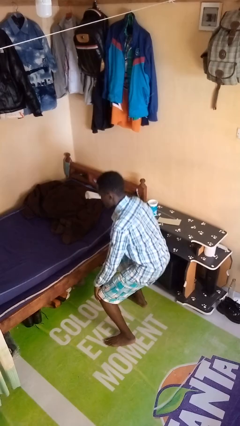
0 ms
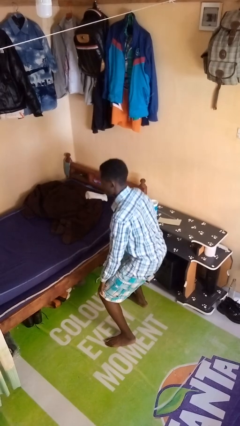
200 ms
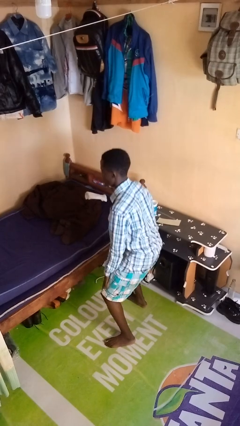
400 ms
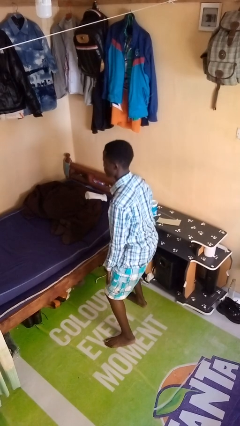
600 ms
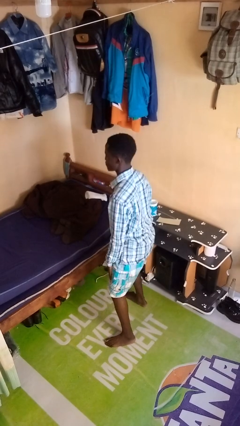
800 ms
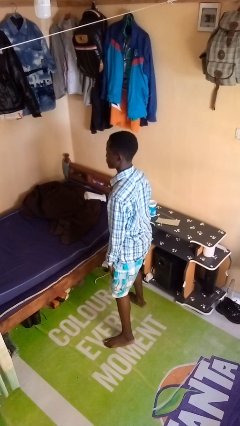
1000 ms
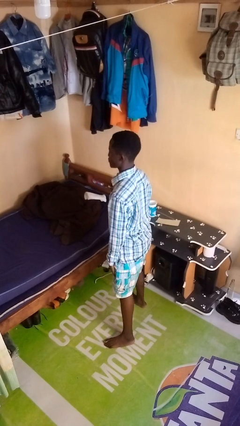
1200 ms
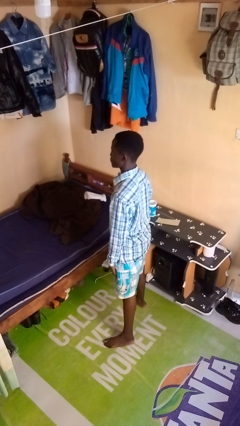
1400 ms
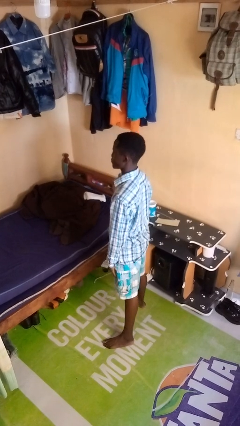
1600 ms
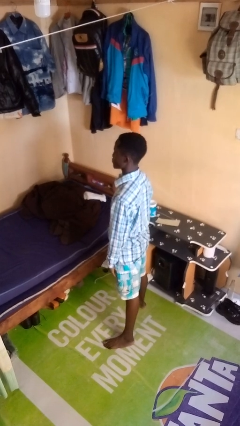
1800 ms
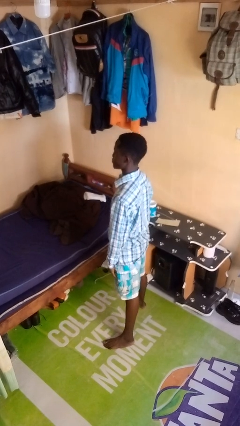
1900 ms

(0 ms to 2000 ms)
person stands up

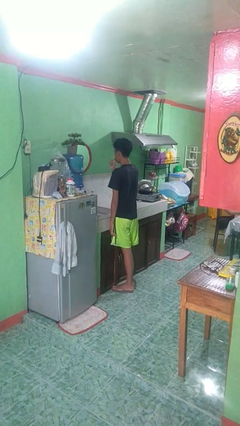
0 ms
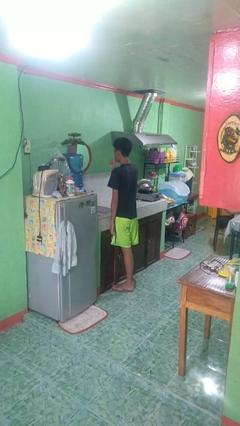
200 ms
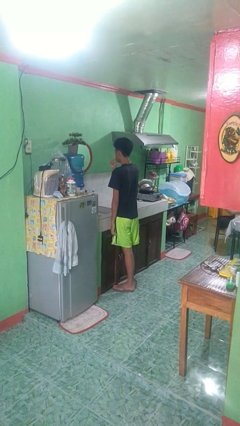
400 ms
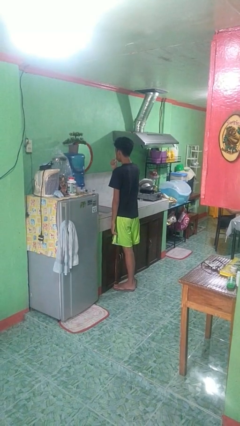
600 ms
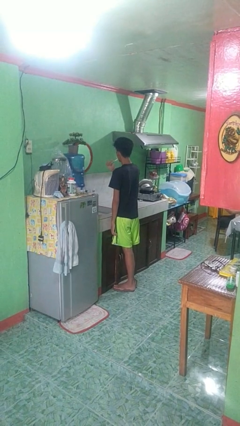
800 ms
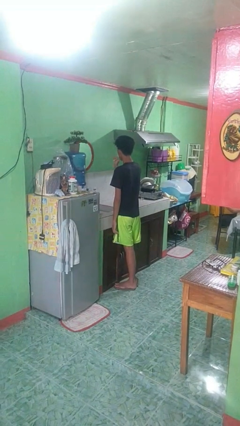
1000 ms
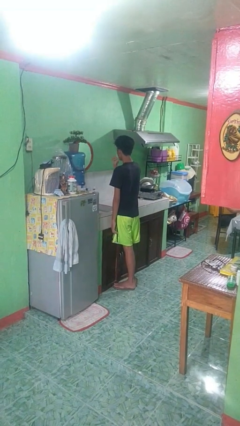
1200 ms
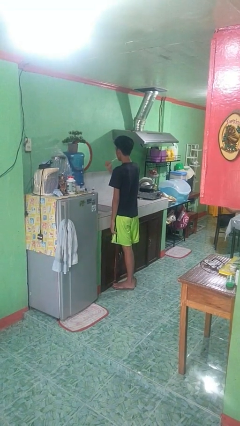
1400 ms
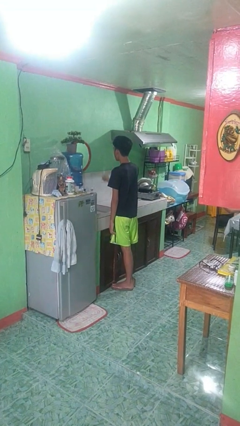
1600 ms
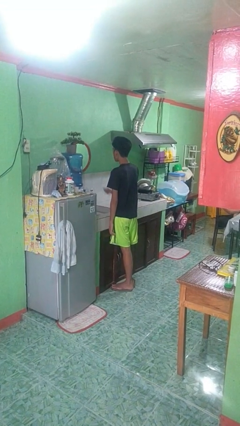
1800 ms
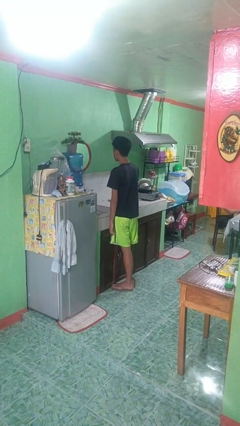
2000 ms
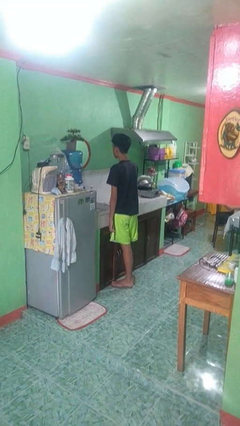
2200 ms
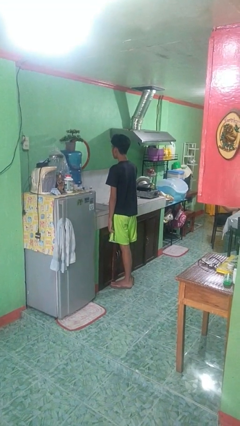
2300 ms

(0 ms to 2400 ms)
person brushes teeth

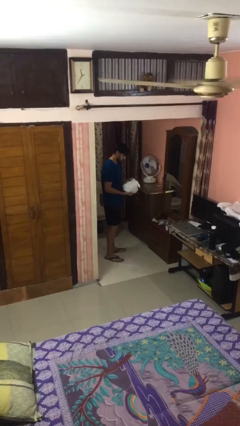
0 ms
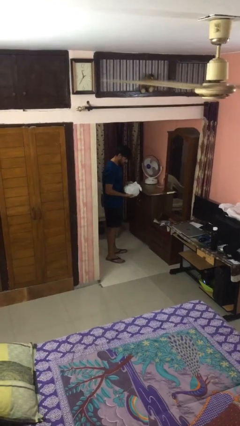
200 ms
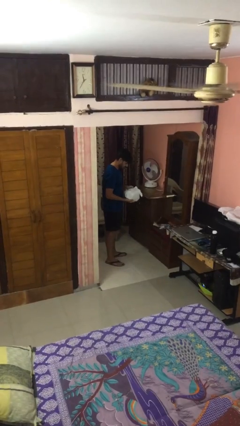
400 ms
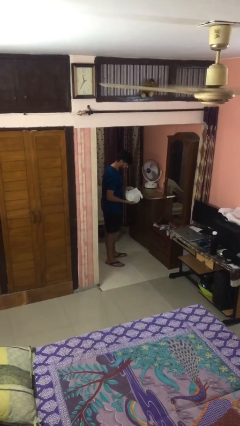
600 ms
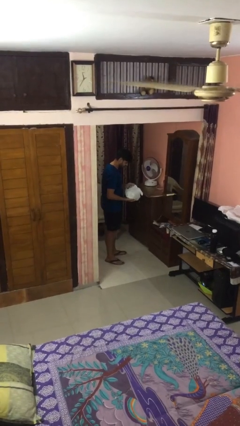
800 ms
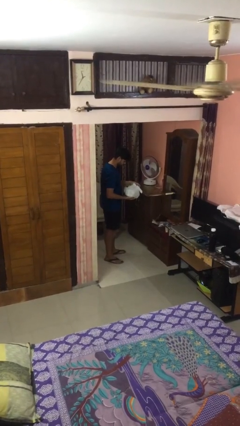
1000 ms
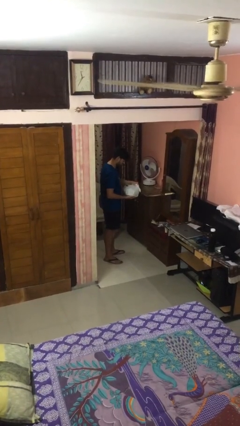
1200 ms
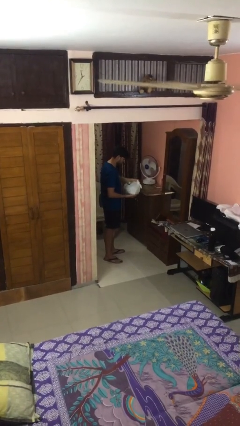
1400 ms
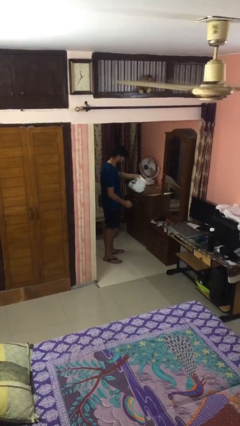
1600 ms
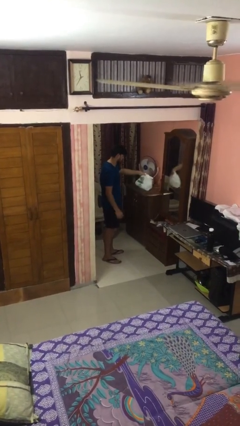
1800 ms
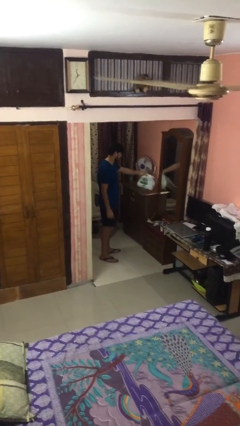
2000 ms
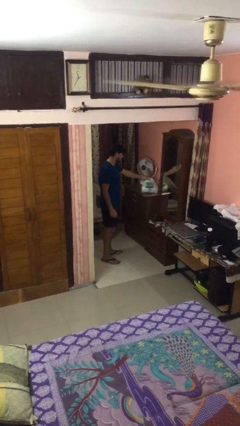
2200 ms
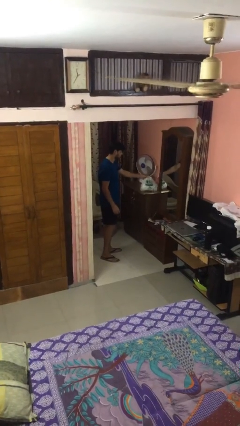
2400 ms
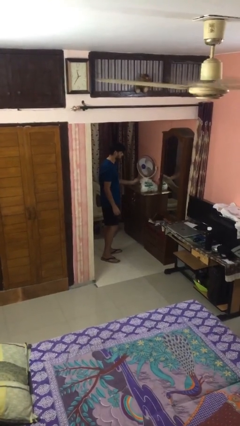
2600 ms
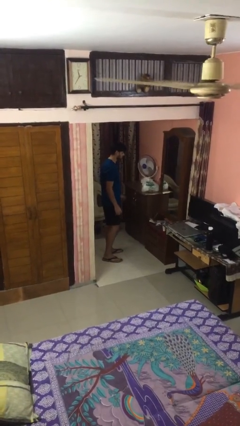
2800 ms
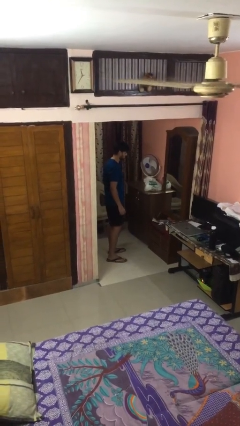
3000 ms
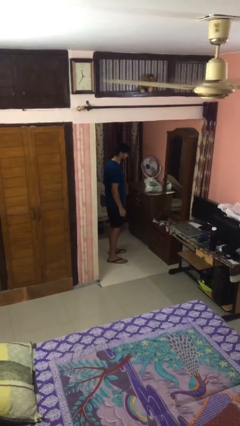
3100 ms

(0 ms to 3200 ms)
person puts down object on countertop

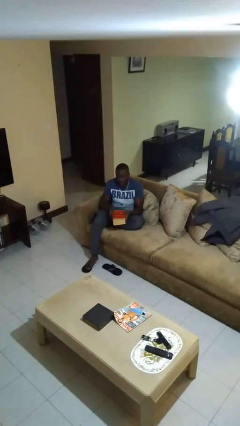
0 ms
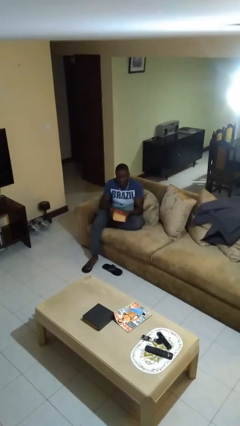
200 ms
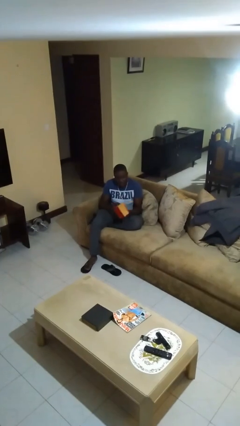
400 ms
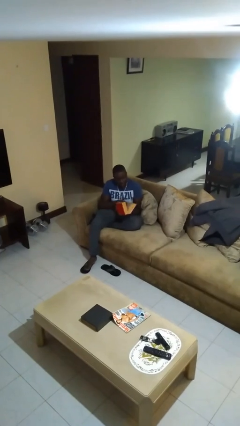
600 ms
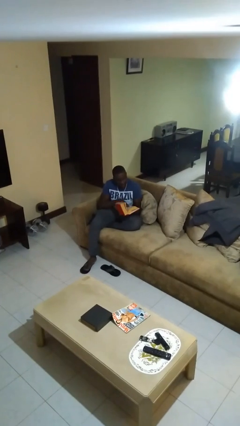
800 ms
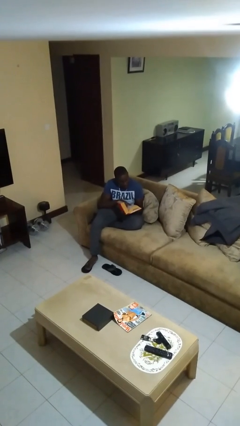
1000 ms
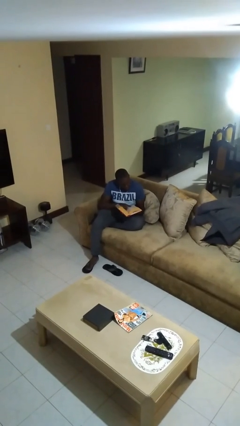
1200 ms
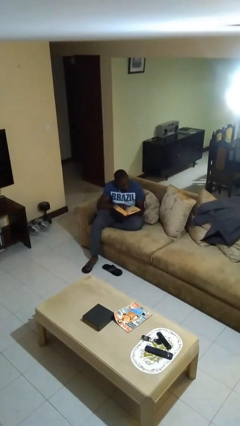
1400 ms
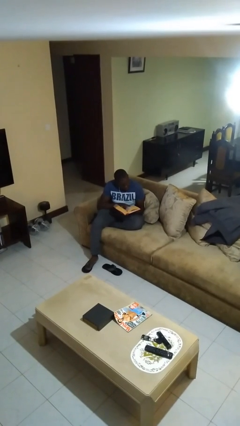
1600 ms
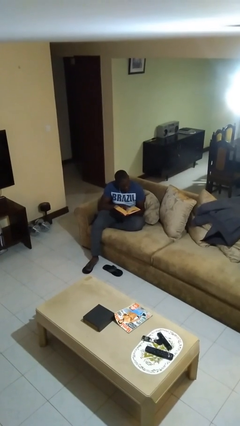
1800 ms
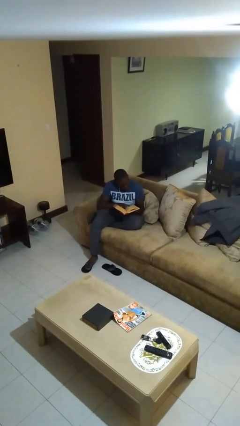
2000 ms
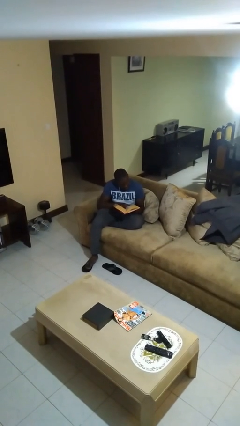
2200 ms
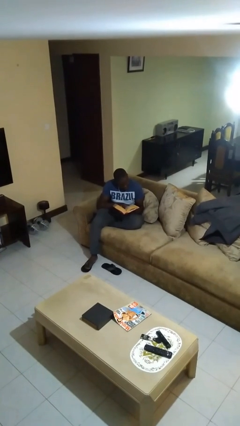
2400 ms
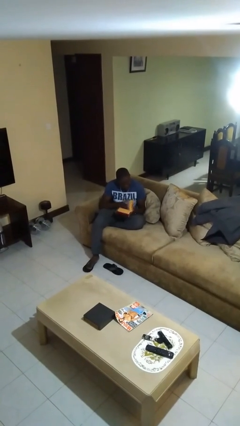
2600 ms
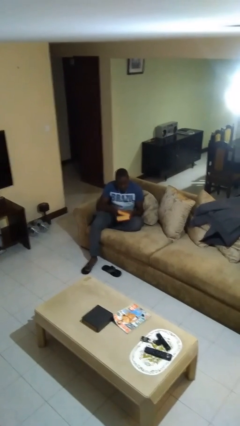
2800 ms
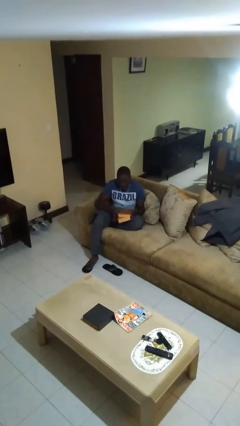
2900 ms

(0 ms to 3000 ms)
person reads book

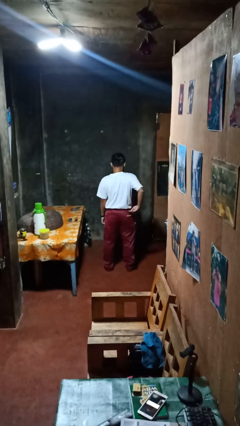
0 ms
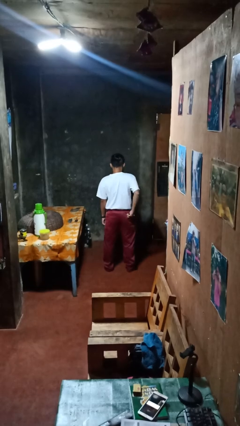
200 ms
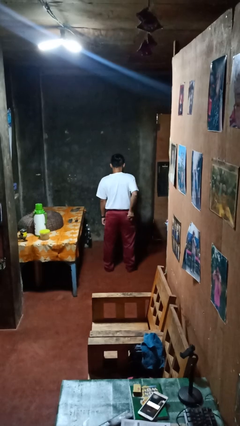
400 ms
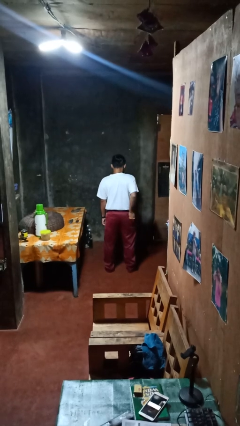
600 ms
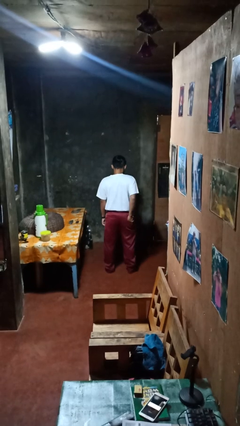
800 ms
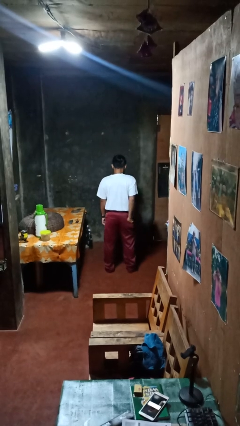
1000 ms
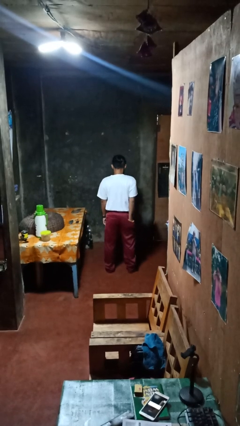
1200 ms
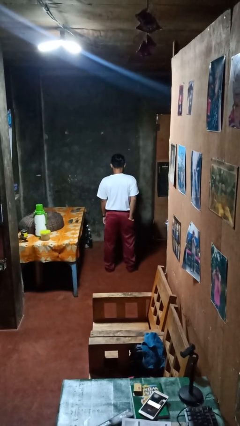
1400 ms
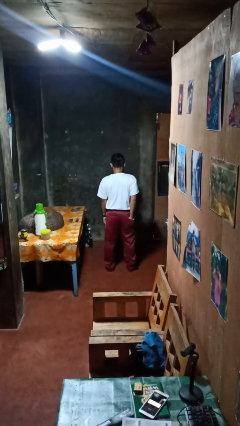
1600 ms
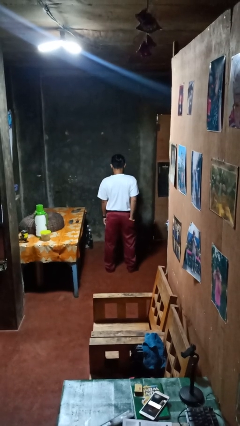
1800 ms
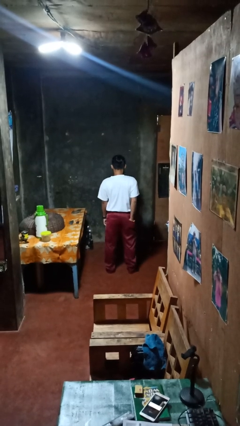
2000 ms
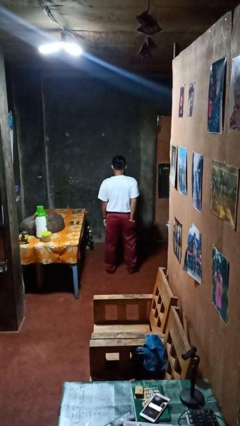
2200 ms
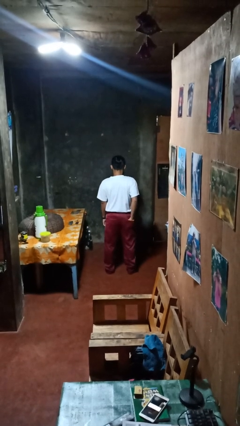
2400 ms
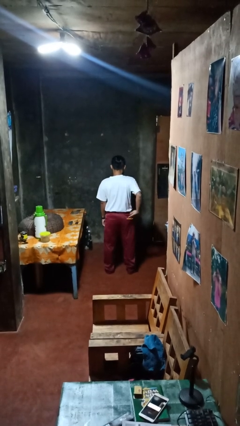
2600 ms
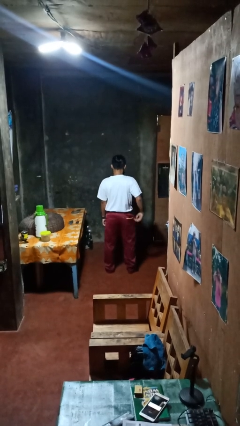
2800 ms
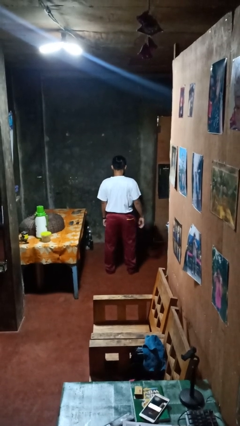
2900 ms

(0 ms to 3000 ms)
person puts hands in back pockets

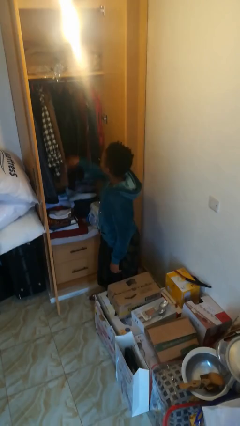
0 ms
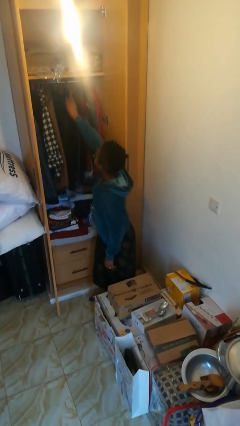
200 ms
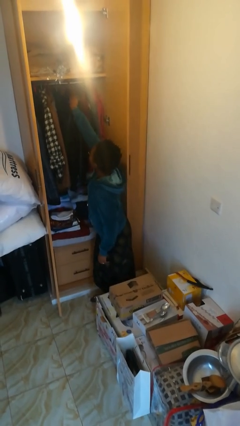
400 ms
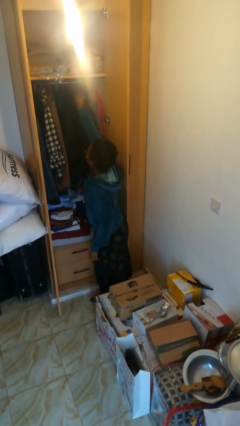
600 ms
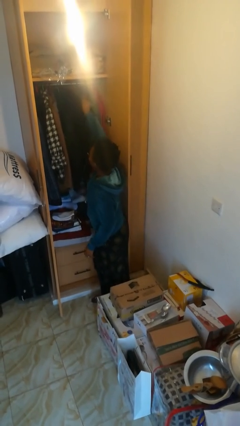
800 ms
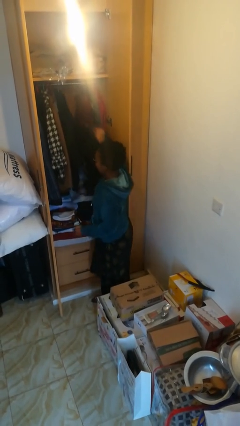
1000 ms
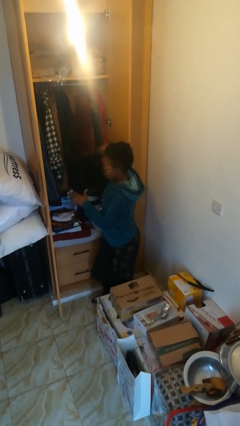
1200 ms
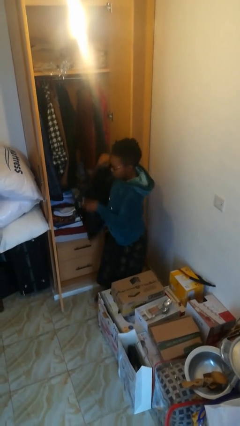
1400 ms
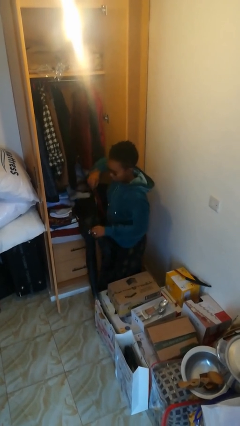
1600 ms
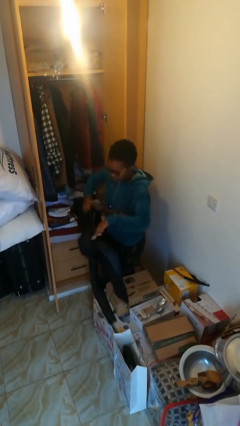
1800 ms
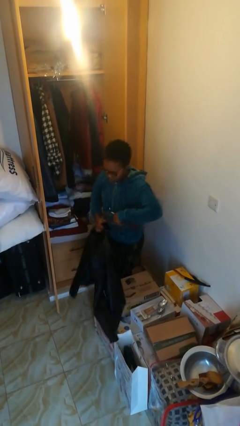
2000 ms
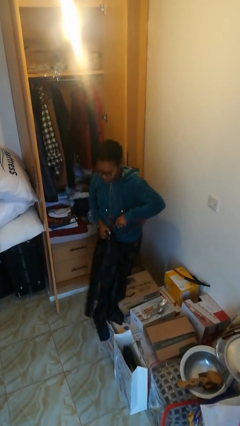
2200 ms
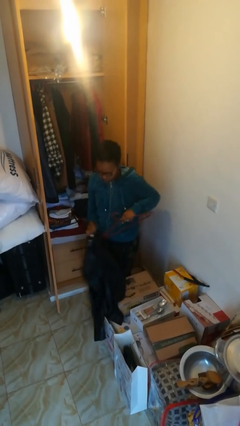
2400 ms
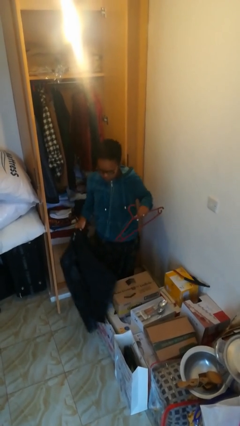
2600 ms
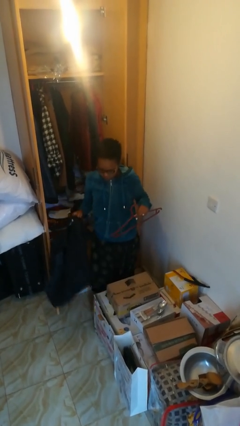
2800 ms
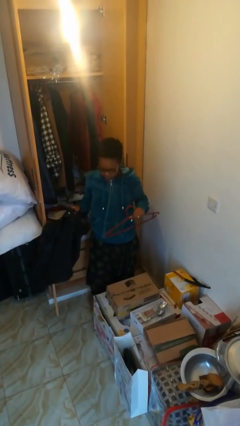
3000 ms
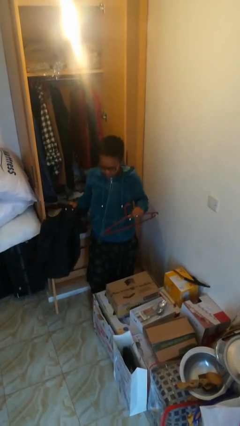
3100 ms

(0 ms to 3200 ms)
person takes clothes from closet

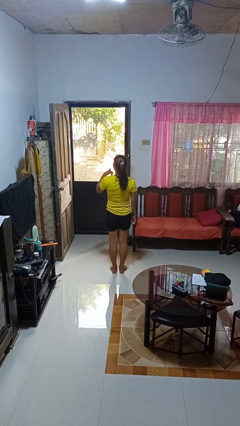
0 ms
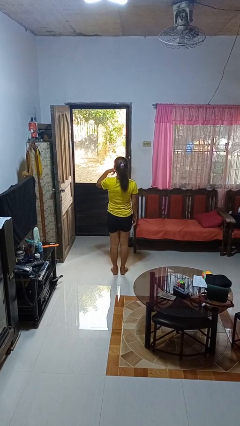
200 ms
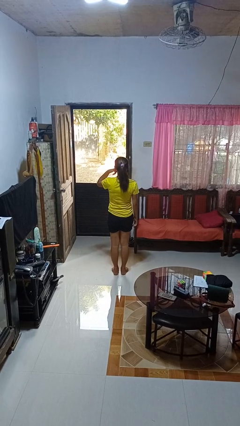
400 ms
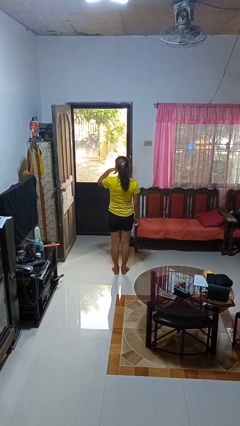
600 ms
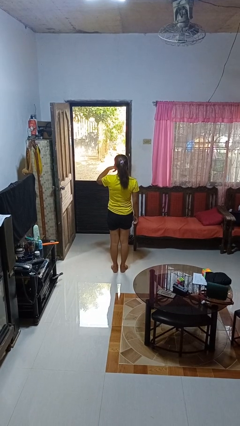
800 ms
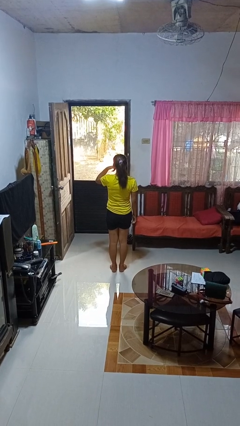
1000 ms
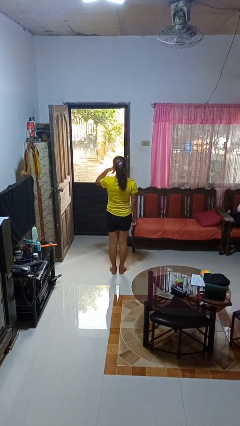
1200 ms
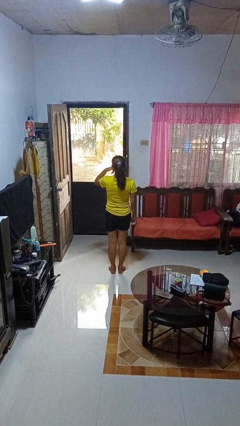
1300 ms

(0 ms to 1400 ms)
person gestures call me
